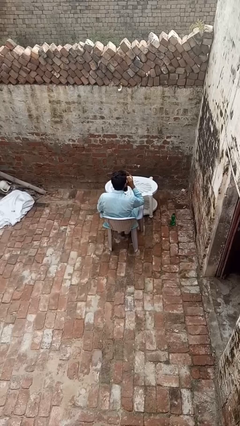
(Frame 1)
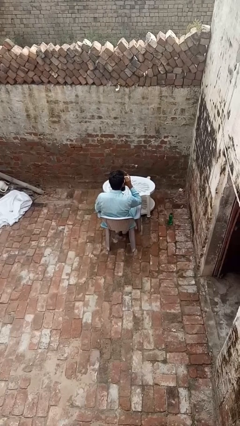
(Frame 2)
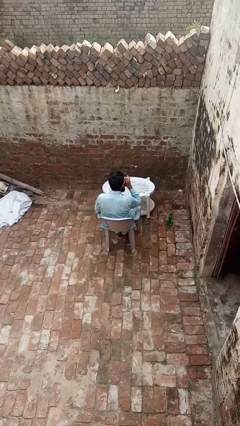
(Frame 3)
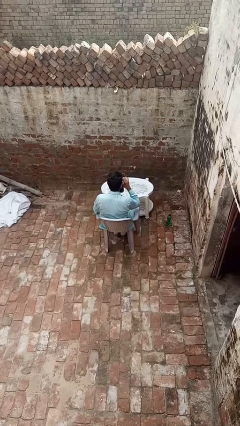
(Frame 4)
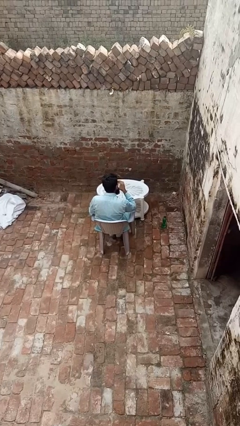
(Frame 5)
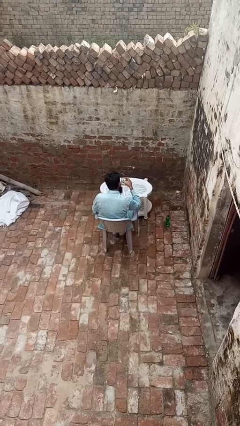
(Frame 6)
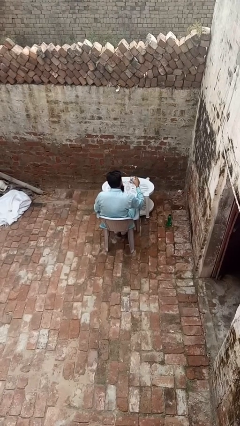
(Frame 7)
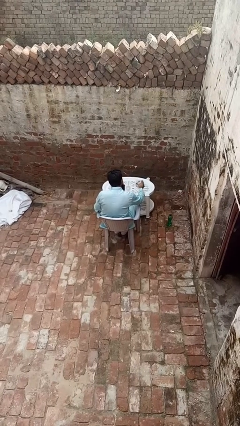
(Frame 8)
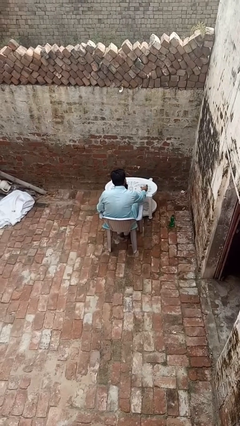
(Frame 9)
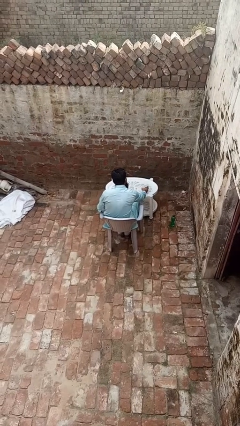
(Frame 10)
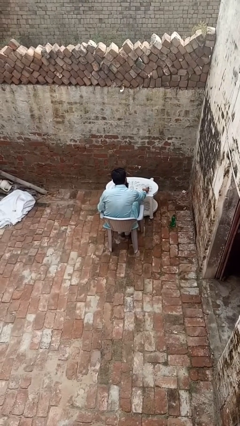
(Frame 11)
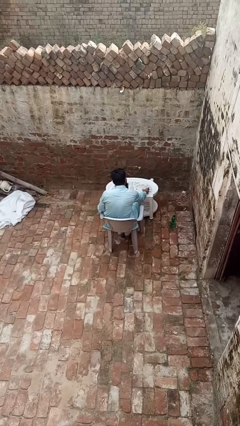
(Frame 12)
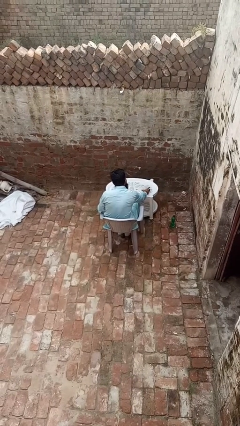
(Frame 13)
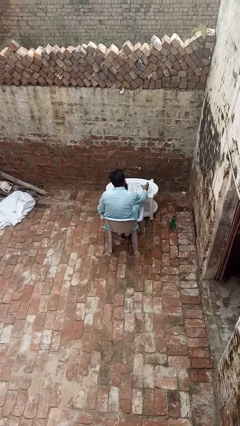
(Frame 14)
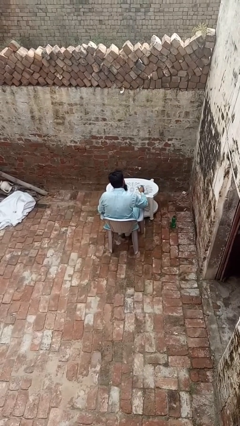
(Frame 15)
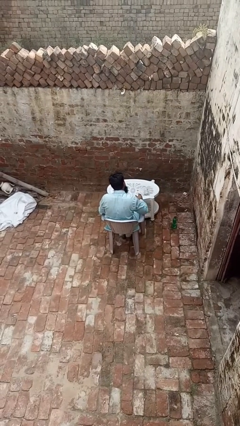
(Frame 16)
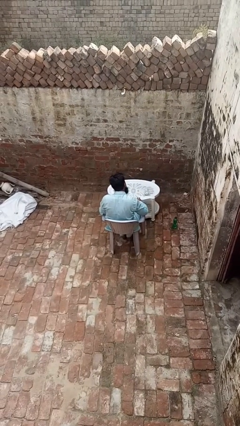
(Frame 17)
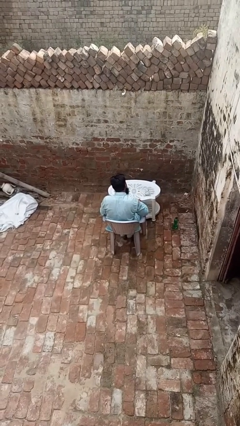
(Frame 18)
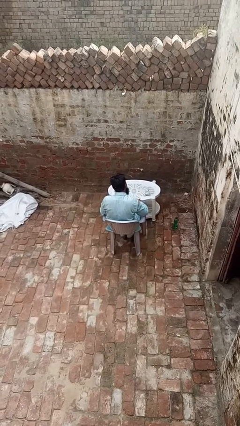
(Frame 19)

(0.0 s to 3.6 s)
person puts down object on table

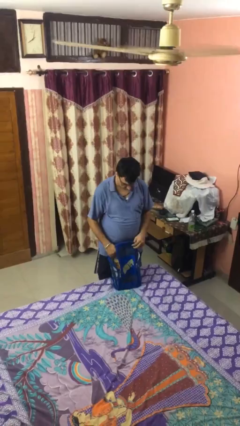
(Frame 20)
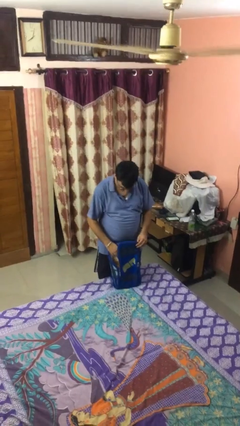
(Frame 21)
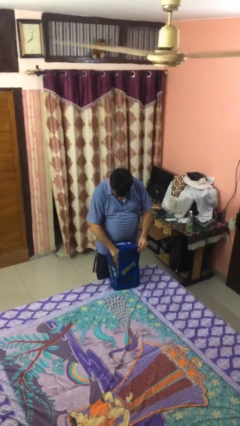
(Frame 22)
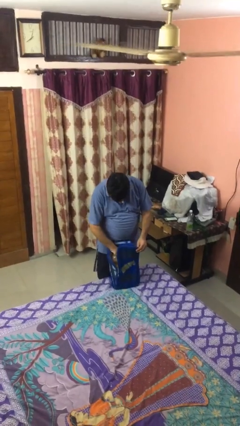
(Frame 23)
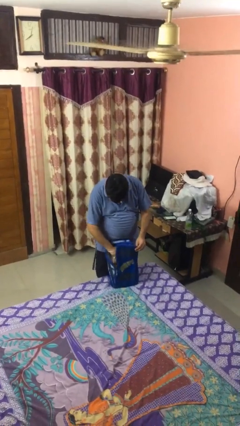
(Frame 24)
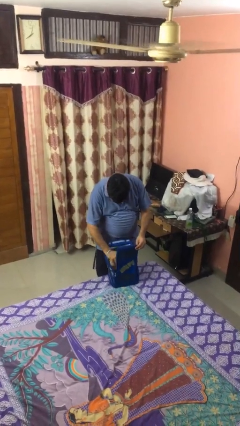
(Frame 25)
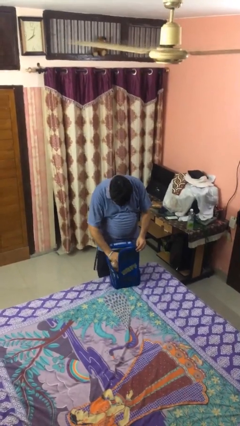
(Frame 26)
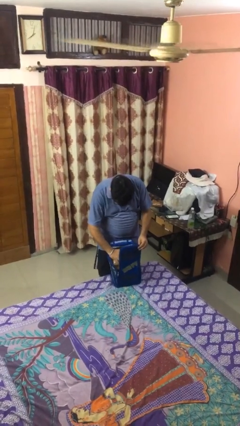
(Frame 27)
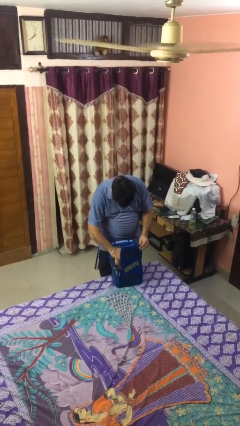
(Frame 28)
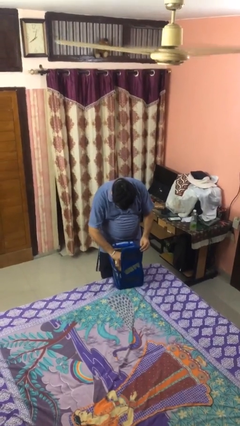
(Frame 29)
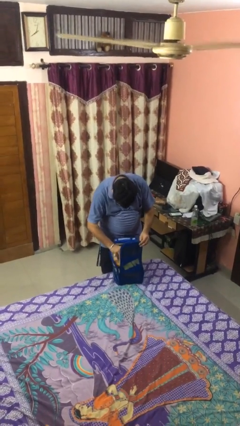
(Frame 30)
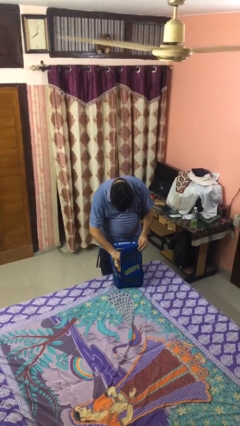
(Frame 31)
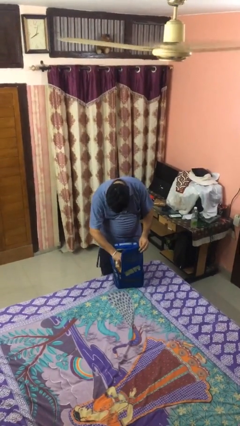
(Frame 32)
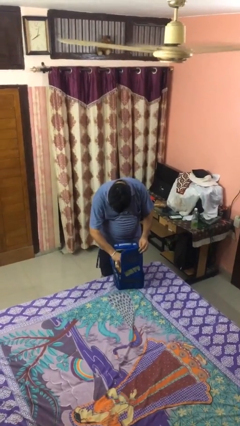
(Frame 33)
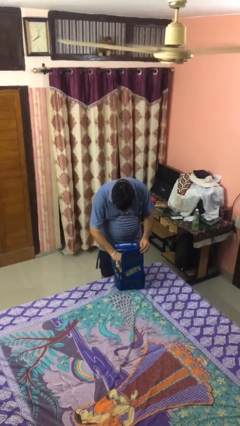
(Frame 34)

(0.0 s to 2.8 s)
person searches in bag

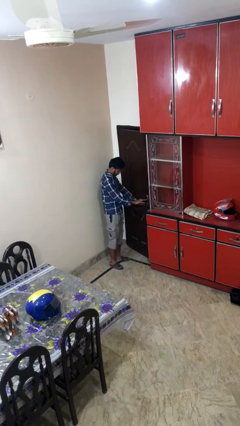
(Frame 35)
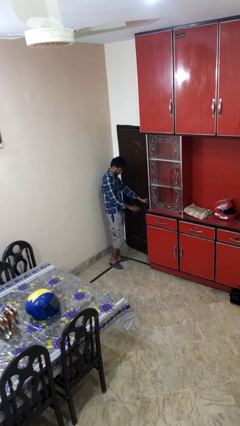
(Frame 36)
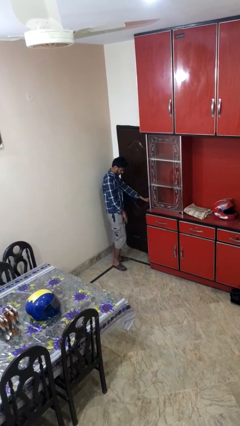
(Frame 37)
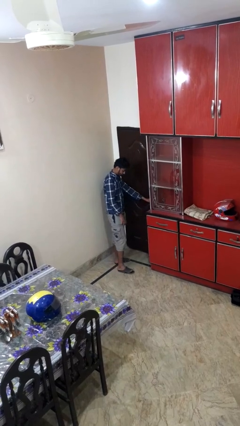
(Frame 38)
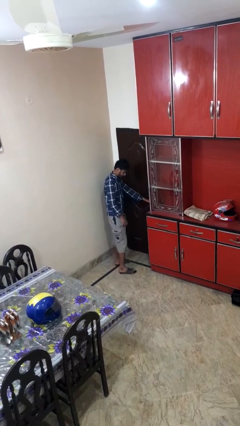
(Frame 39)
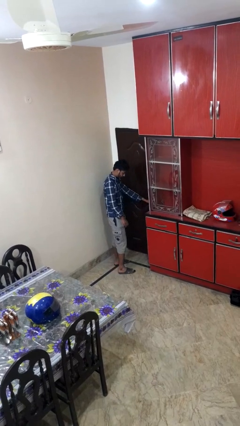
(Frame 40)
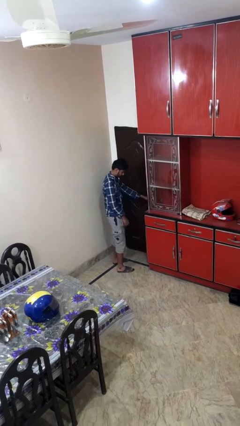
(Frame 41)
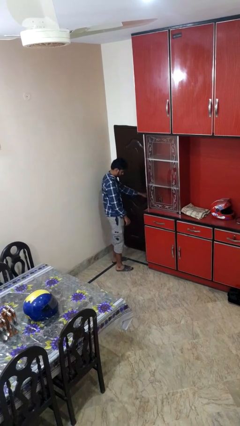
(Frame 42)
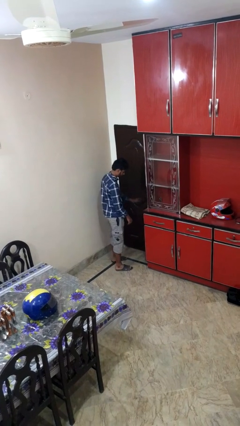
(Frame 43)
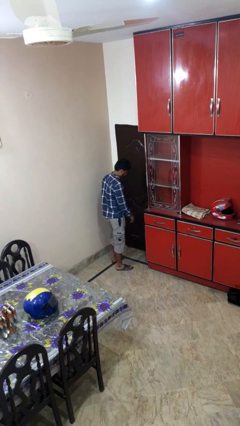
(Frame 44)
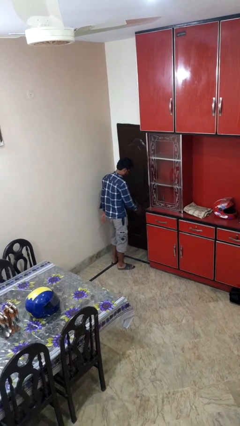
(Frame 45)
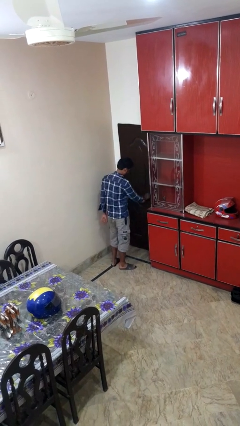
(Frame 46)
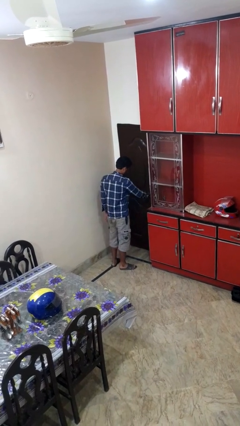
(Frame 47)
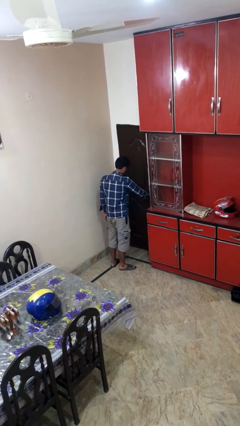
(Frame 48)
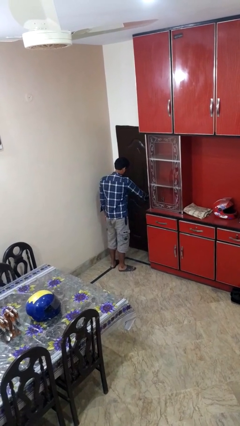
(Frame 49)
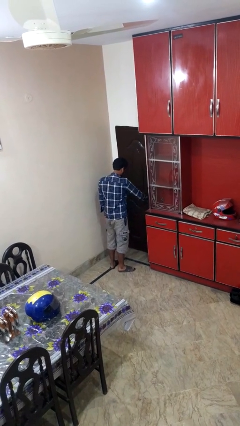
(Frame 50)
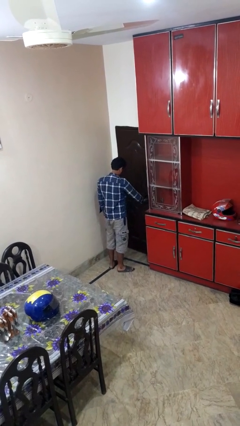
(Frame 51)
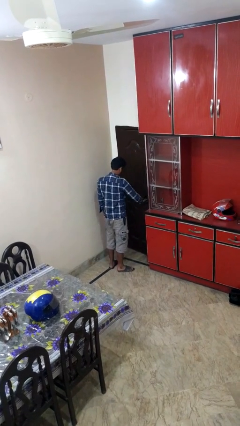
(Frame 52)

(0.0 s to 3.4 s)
person closes facility door

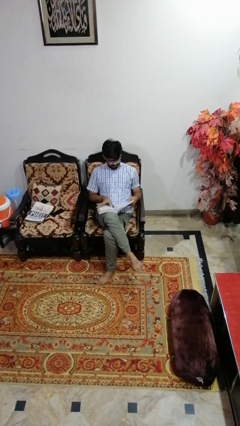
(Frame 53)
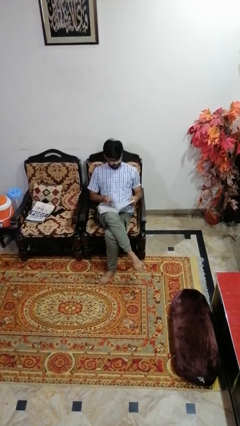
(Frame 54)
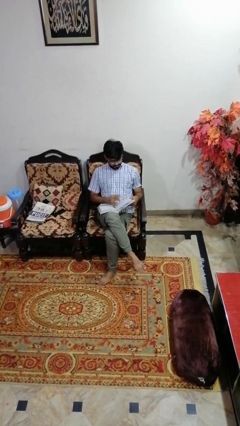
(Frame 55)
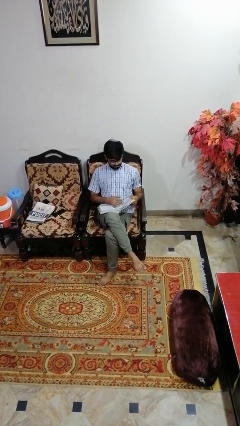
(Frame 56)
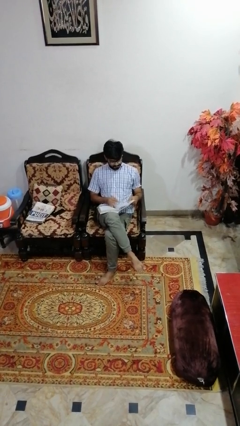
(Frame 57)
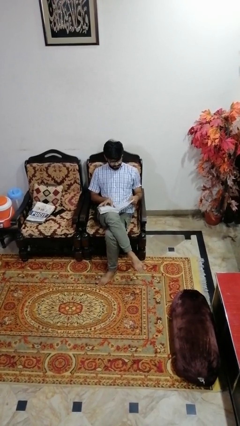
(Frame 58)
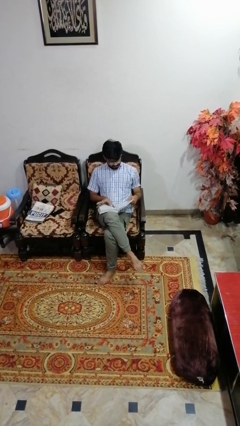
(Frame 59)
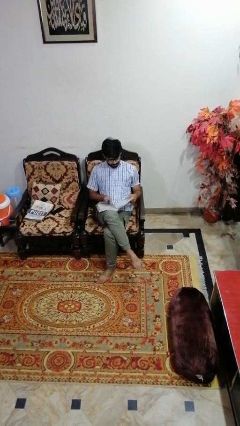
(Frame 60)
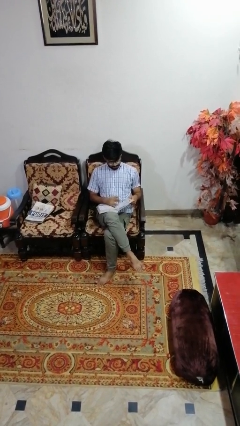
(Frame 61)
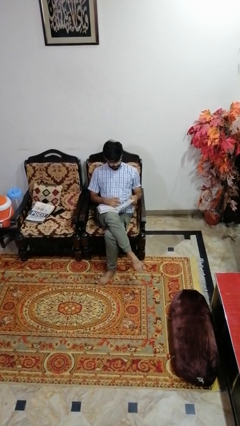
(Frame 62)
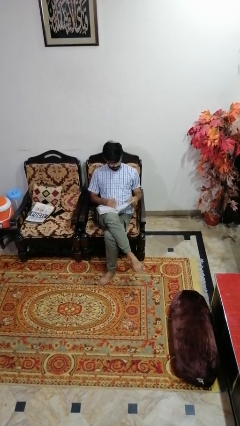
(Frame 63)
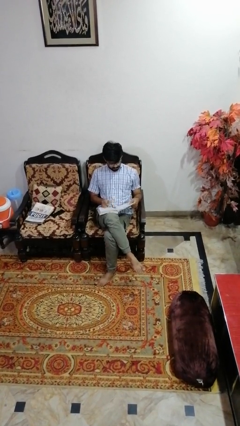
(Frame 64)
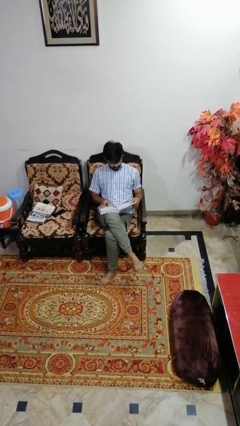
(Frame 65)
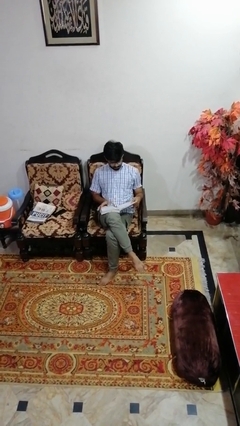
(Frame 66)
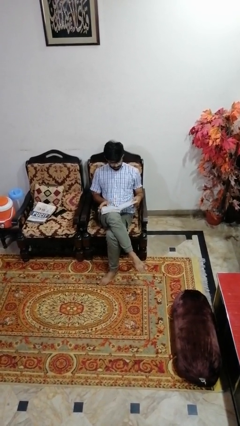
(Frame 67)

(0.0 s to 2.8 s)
person looks at wristwatch

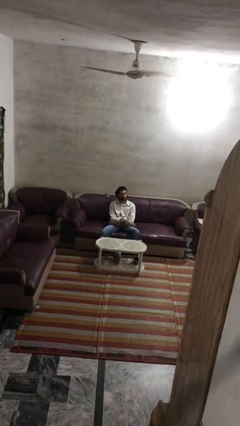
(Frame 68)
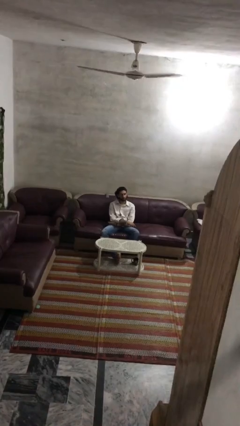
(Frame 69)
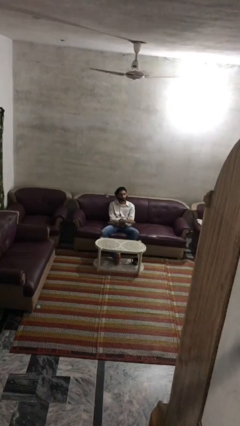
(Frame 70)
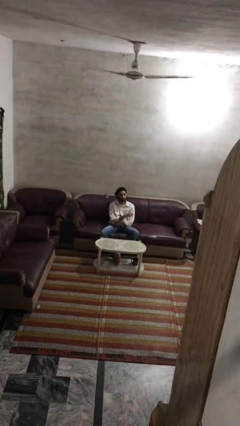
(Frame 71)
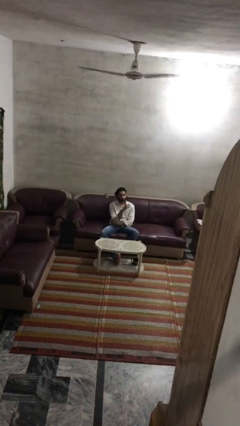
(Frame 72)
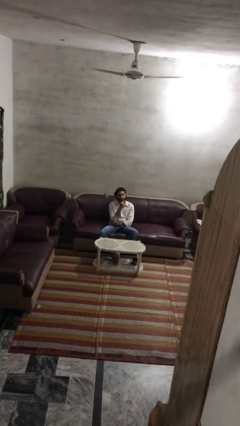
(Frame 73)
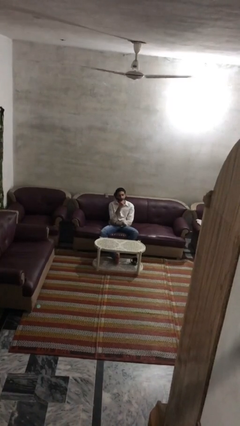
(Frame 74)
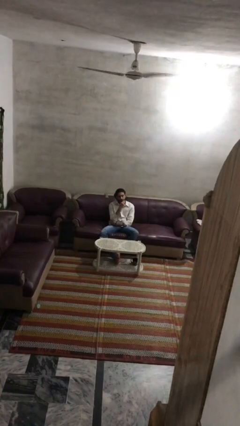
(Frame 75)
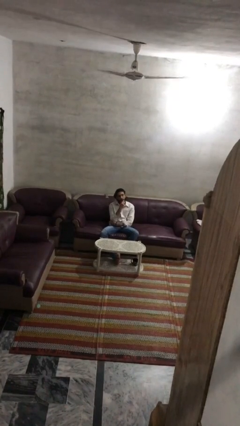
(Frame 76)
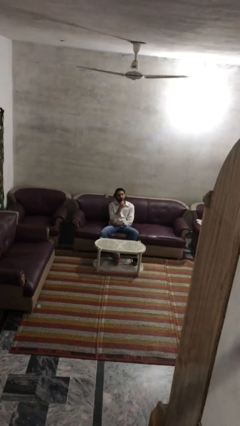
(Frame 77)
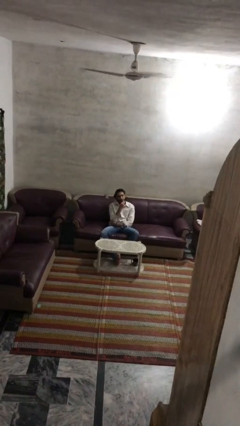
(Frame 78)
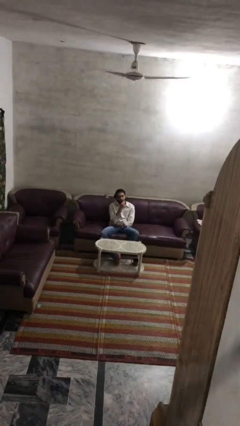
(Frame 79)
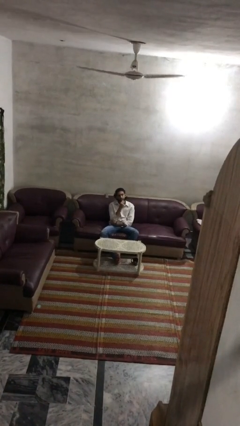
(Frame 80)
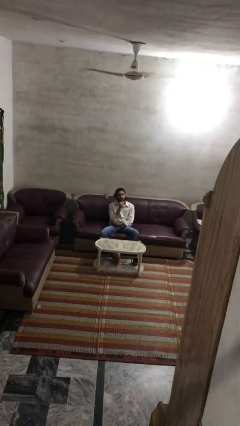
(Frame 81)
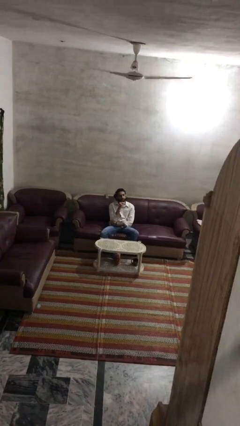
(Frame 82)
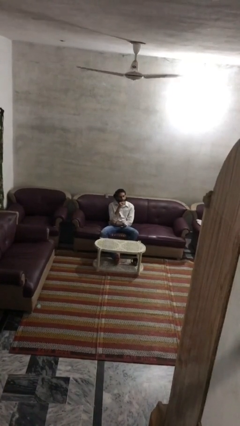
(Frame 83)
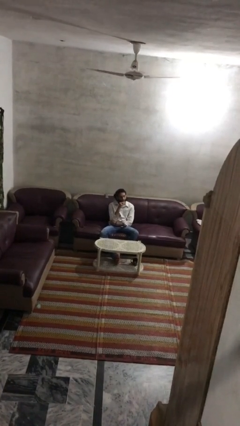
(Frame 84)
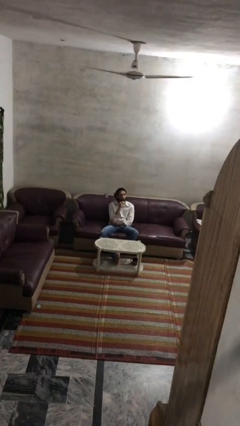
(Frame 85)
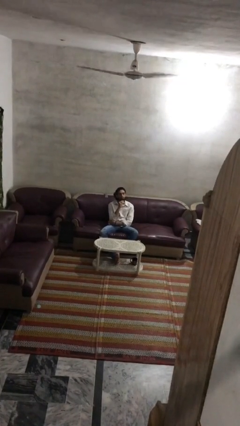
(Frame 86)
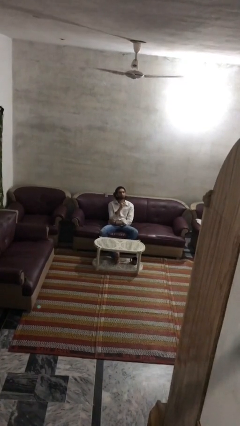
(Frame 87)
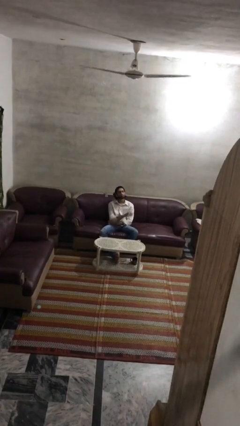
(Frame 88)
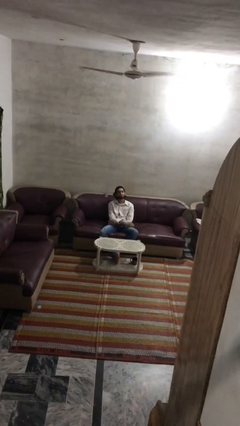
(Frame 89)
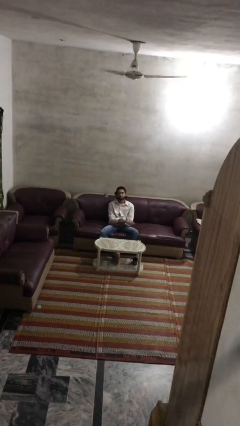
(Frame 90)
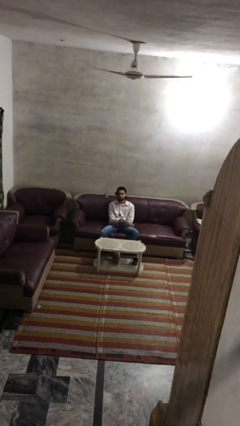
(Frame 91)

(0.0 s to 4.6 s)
person strokes chin

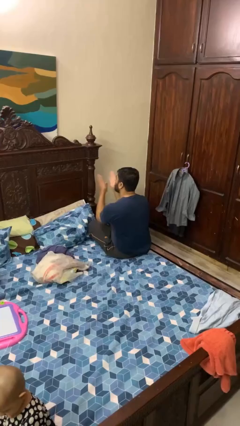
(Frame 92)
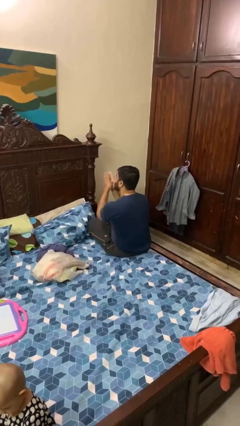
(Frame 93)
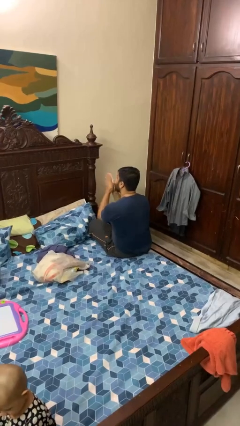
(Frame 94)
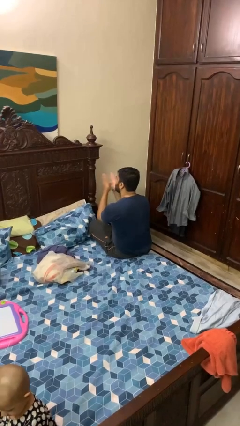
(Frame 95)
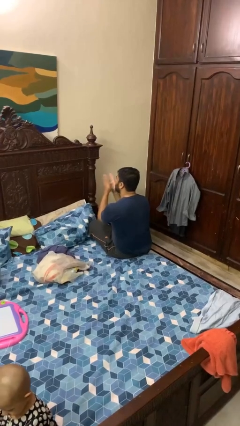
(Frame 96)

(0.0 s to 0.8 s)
person claps hands
